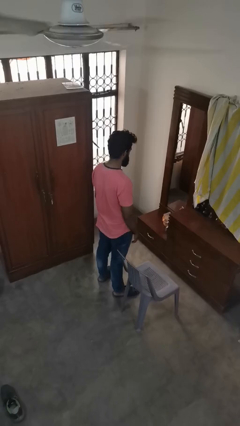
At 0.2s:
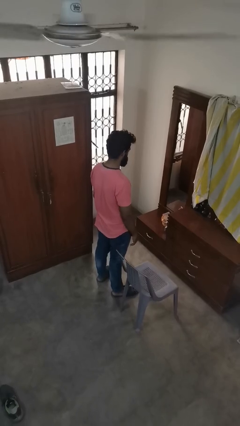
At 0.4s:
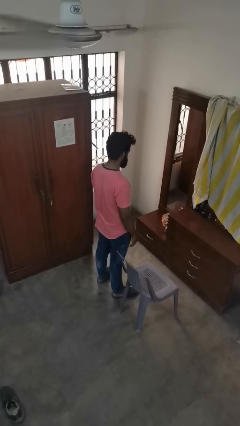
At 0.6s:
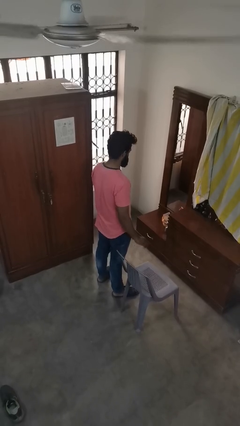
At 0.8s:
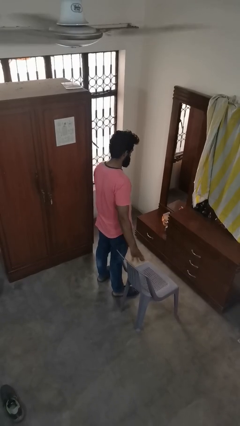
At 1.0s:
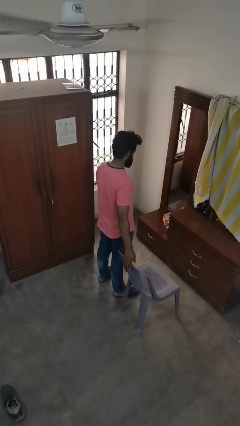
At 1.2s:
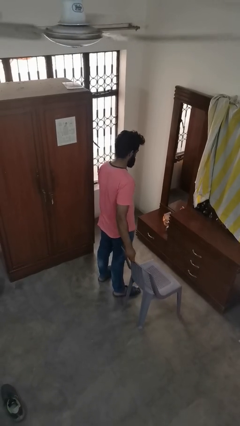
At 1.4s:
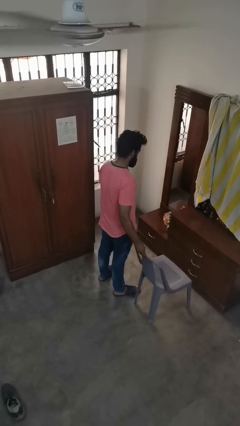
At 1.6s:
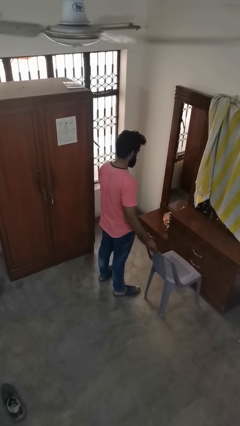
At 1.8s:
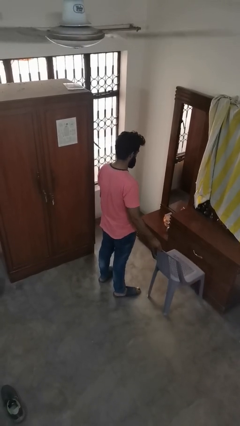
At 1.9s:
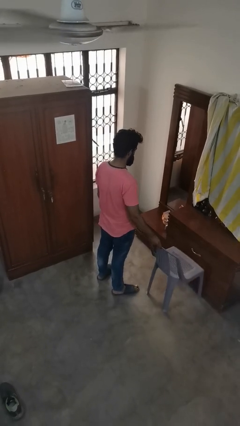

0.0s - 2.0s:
person pushes in chair

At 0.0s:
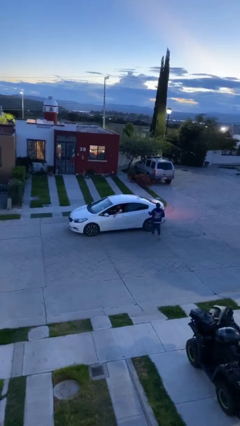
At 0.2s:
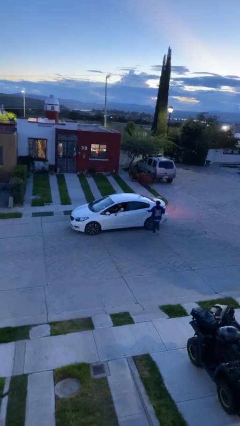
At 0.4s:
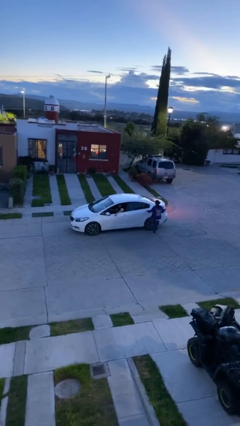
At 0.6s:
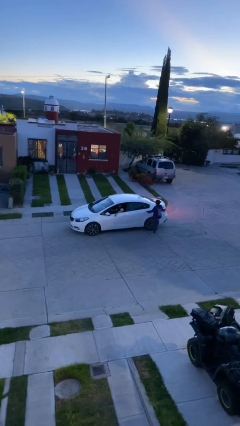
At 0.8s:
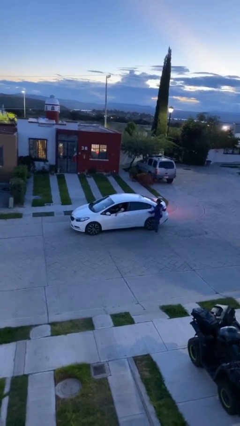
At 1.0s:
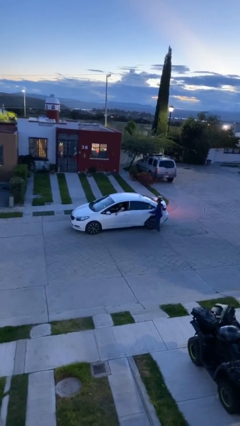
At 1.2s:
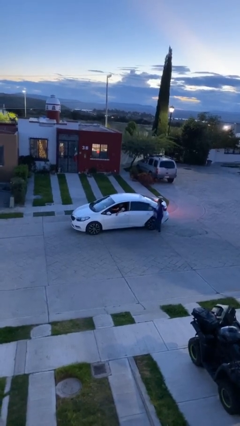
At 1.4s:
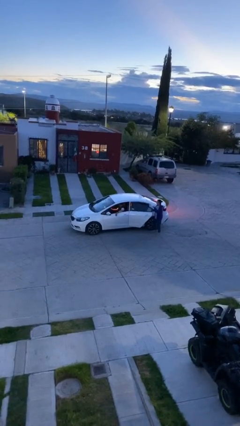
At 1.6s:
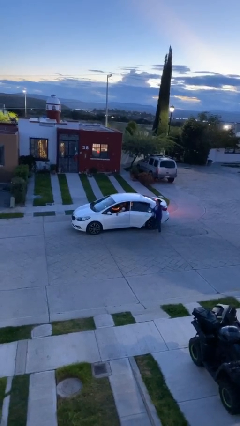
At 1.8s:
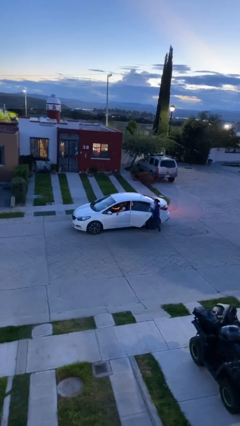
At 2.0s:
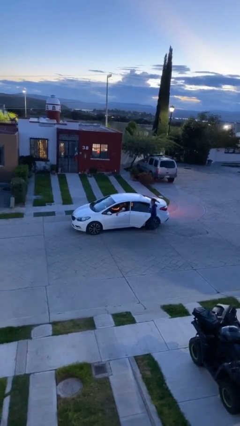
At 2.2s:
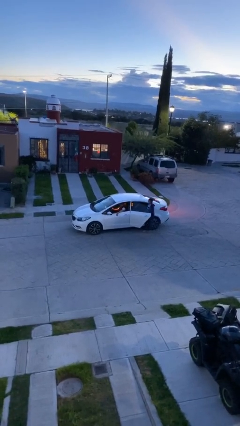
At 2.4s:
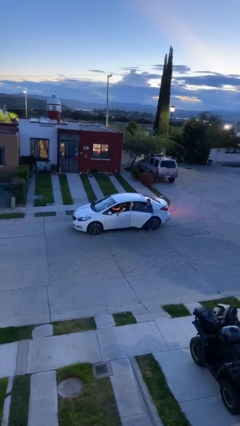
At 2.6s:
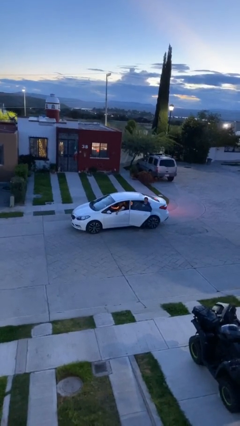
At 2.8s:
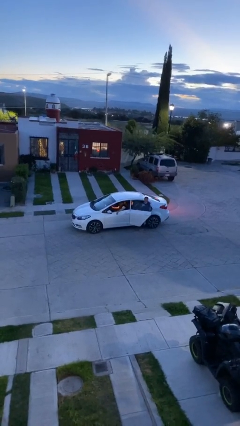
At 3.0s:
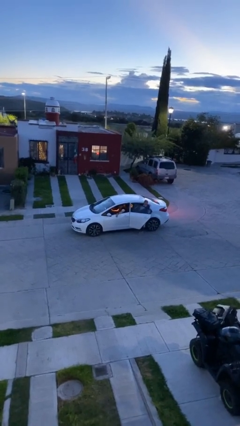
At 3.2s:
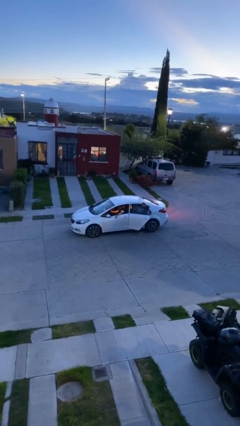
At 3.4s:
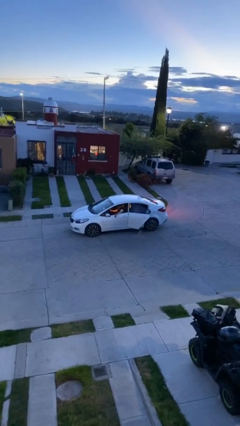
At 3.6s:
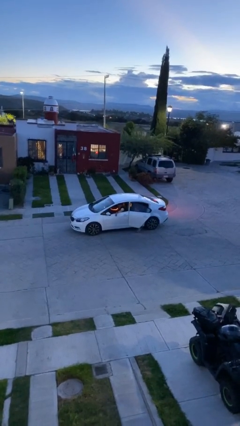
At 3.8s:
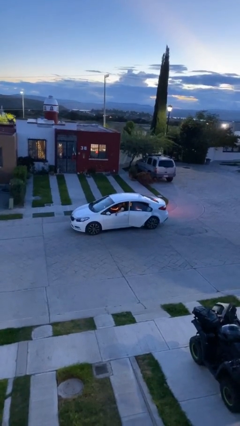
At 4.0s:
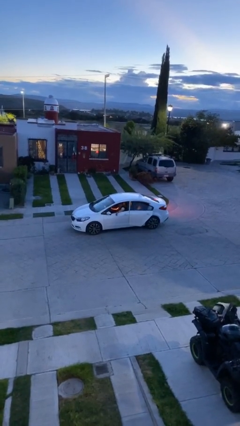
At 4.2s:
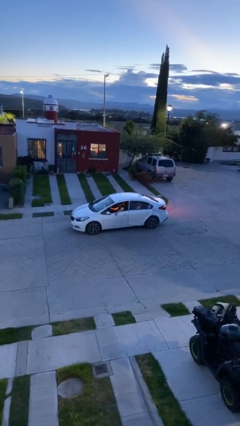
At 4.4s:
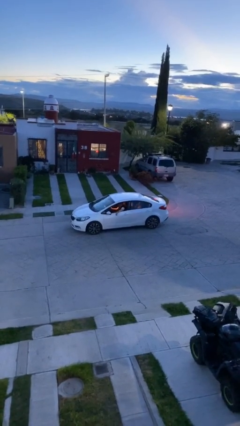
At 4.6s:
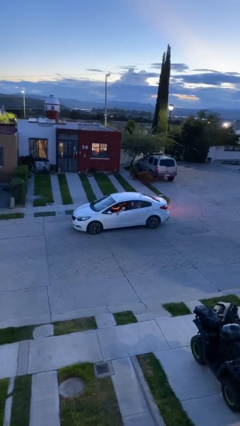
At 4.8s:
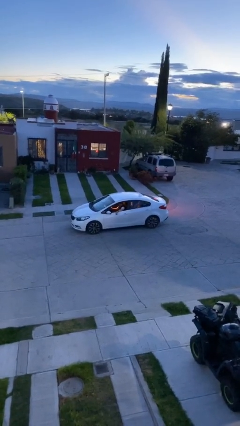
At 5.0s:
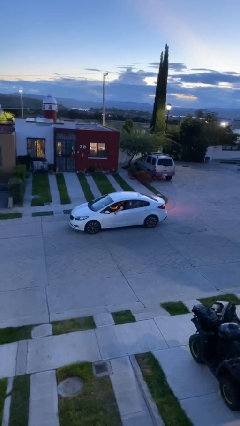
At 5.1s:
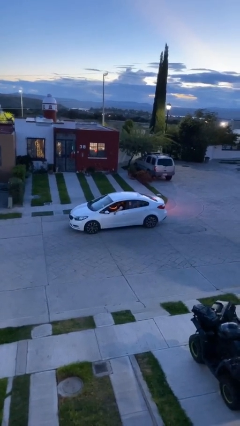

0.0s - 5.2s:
car picks up person

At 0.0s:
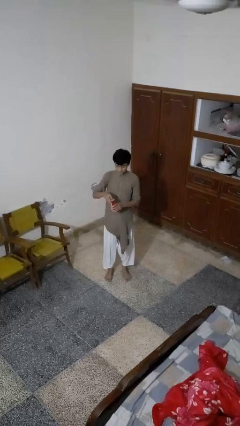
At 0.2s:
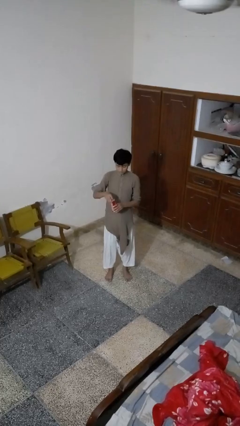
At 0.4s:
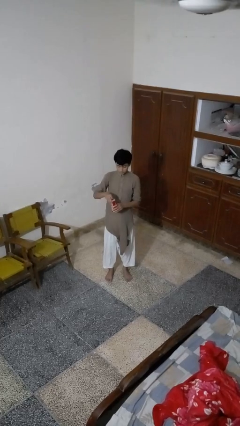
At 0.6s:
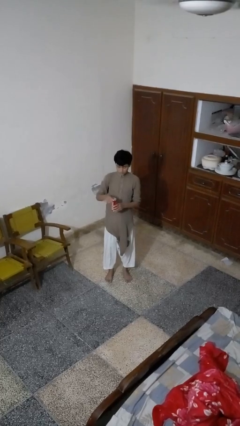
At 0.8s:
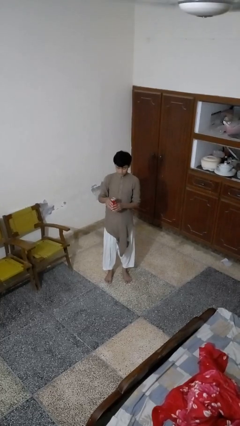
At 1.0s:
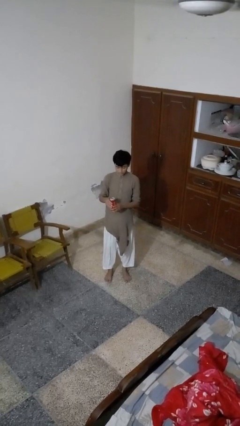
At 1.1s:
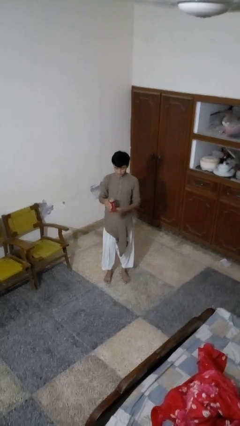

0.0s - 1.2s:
person opens beverage can

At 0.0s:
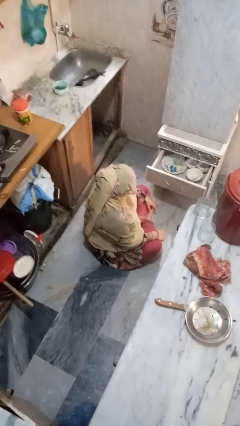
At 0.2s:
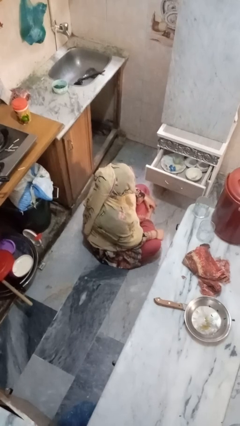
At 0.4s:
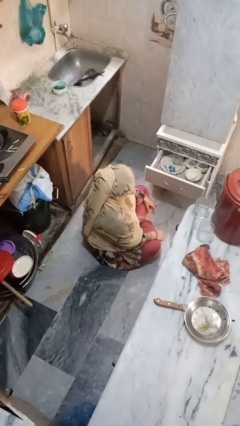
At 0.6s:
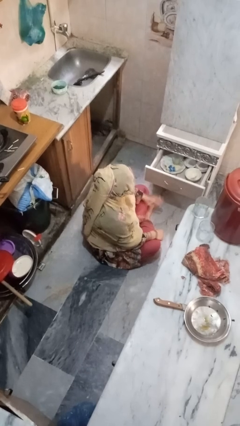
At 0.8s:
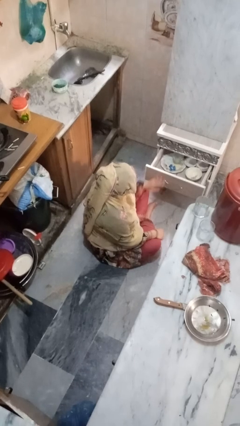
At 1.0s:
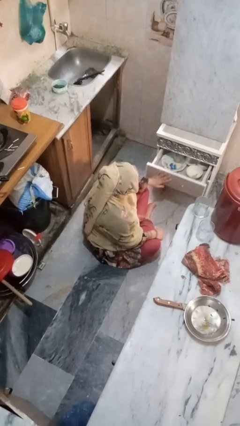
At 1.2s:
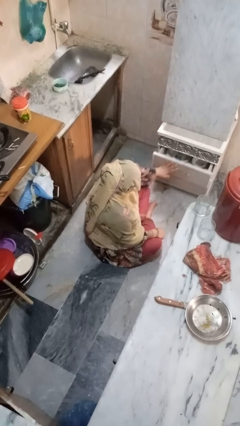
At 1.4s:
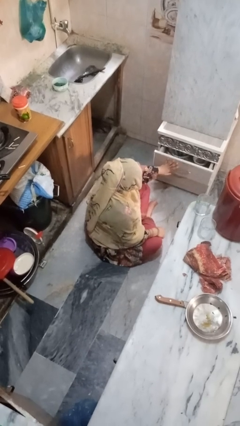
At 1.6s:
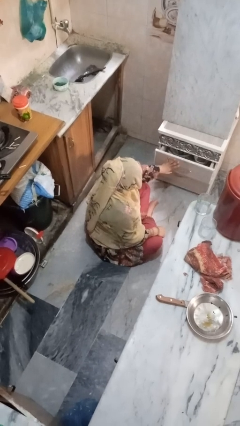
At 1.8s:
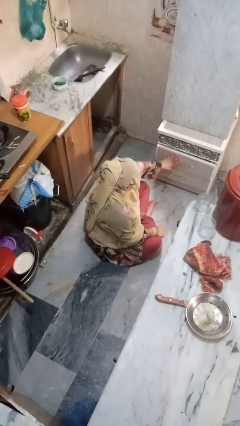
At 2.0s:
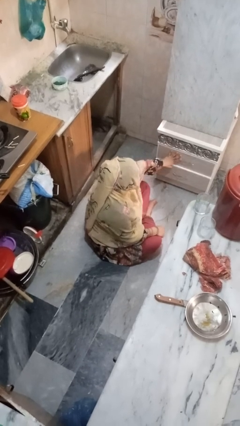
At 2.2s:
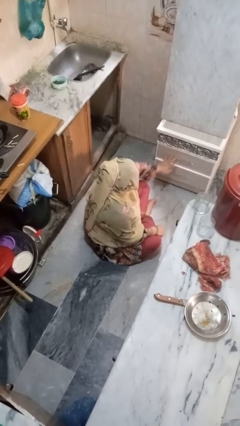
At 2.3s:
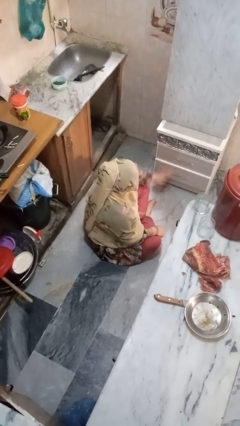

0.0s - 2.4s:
person closes kitchen drawer

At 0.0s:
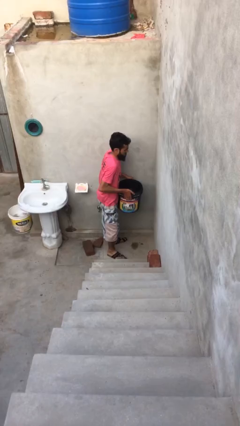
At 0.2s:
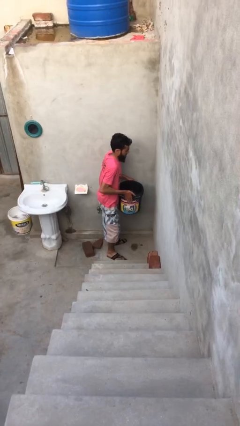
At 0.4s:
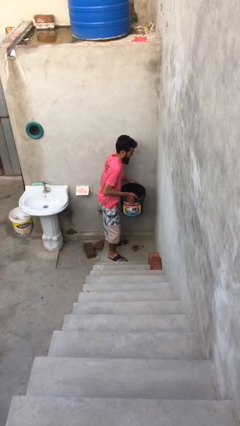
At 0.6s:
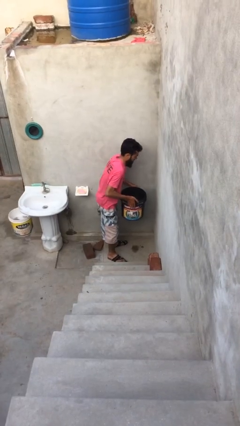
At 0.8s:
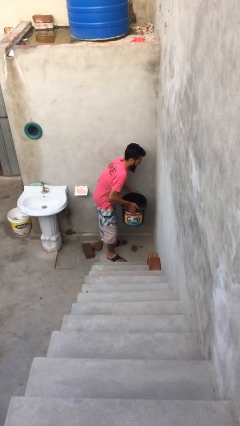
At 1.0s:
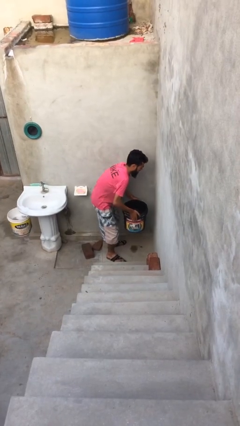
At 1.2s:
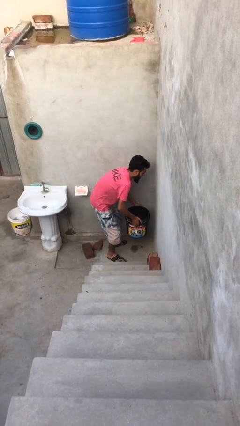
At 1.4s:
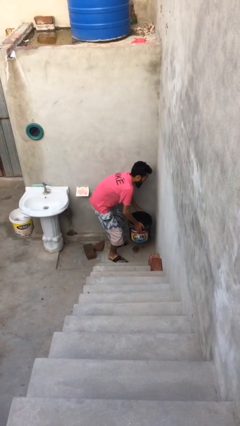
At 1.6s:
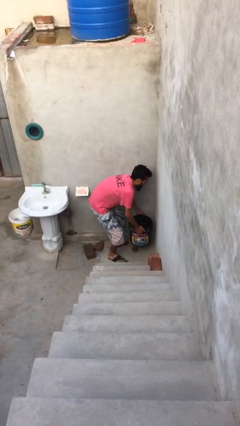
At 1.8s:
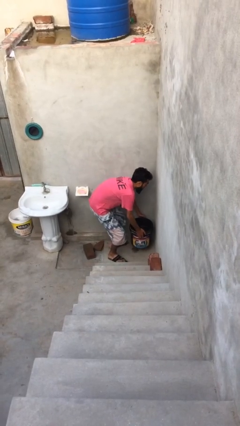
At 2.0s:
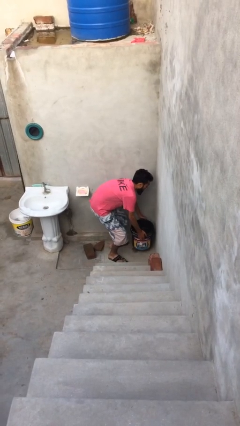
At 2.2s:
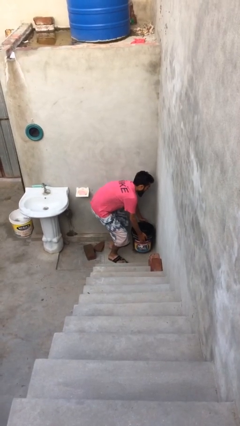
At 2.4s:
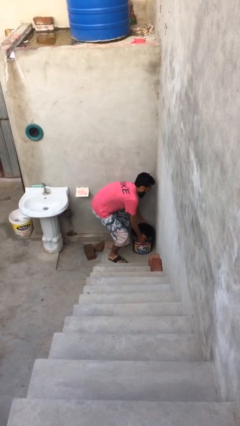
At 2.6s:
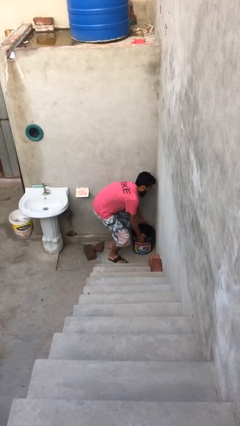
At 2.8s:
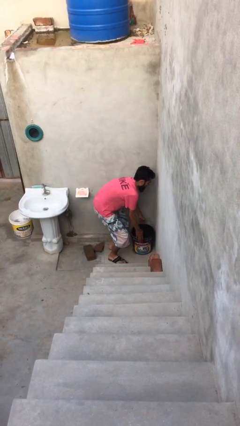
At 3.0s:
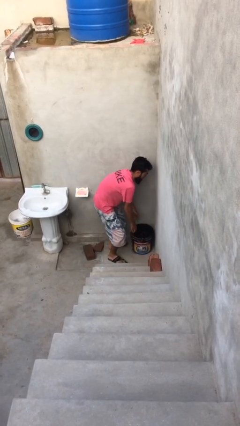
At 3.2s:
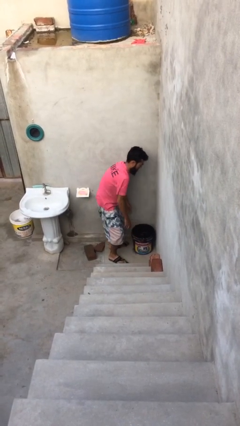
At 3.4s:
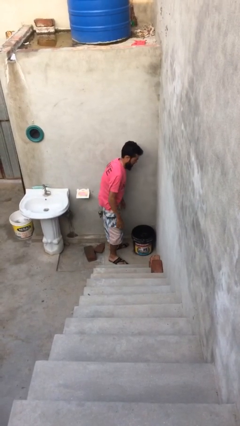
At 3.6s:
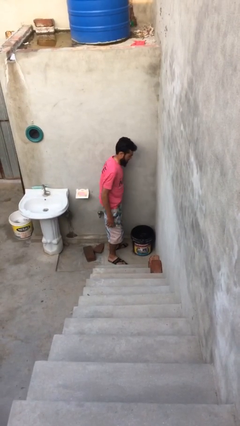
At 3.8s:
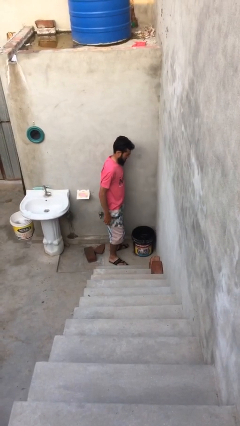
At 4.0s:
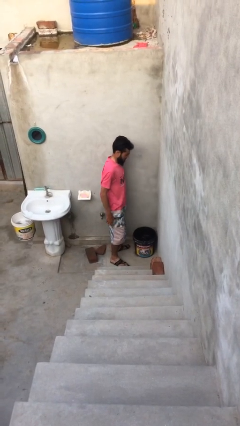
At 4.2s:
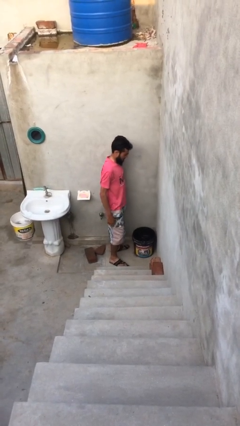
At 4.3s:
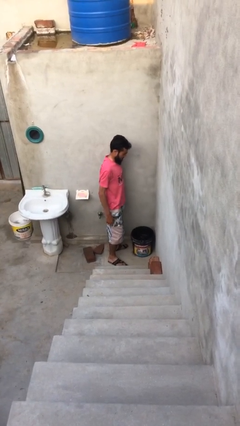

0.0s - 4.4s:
person puts down object on floor

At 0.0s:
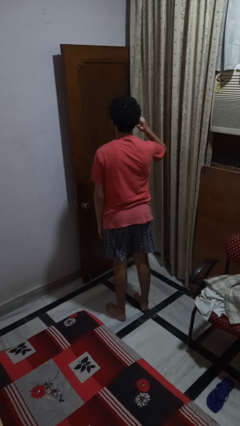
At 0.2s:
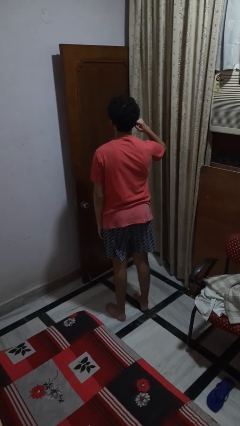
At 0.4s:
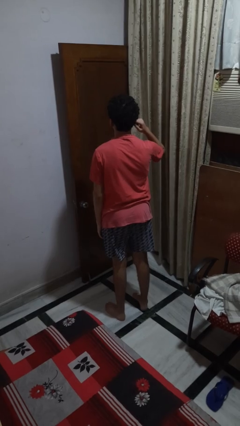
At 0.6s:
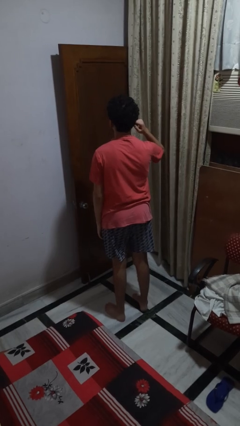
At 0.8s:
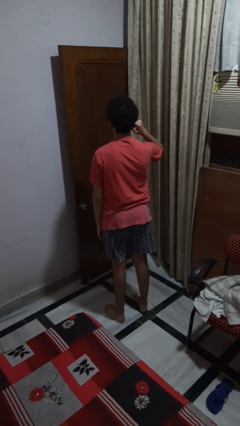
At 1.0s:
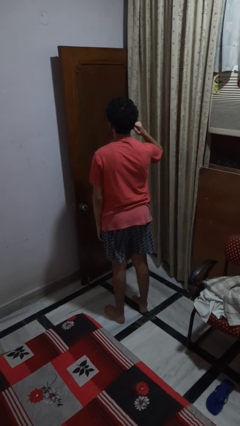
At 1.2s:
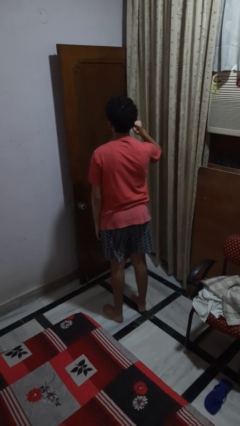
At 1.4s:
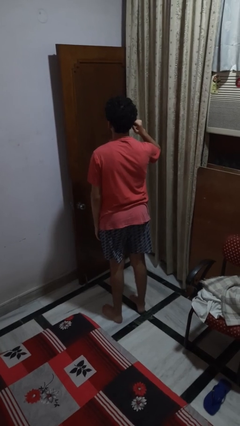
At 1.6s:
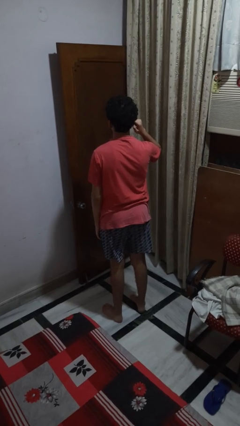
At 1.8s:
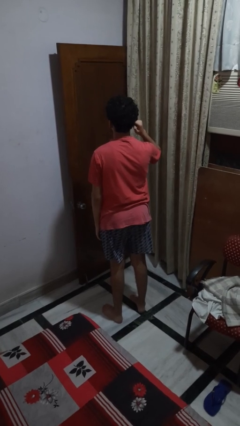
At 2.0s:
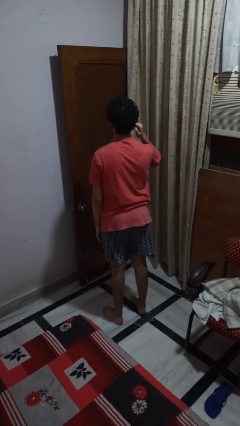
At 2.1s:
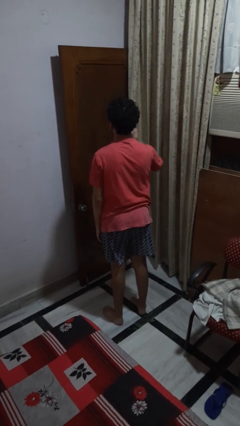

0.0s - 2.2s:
person touches earlobe

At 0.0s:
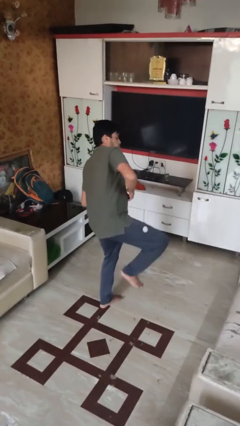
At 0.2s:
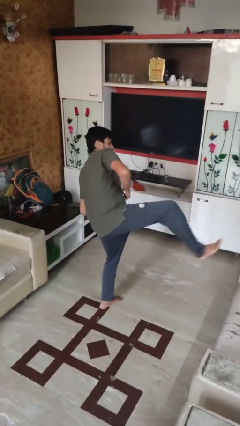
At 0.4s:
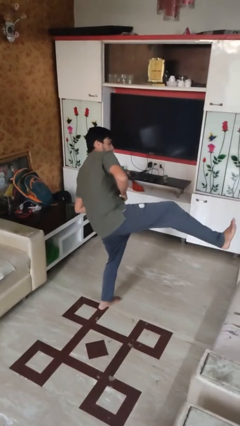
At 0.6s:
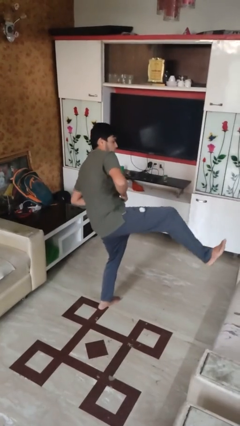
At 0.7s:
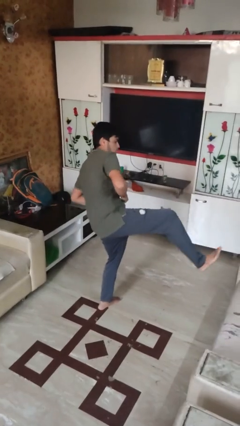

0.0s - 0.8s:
person karate kicks
